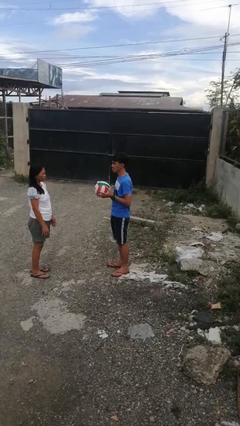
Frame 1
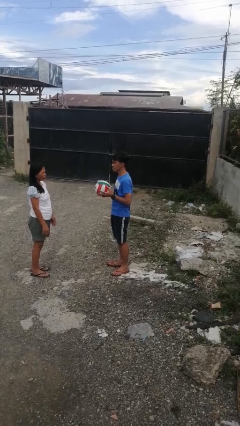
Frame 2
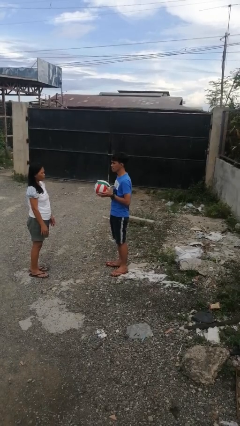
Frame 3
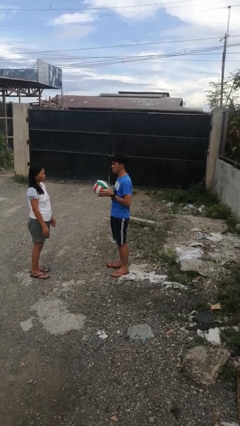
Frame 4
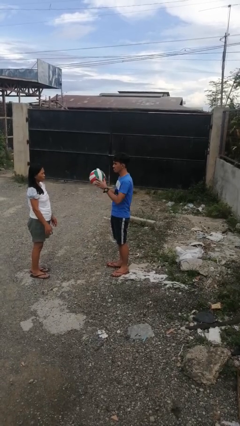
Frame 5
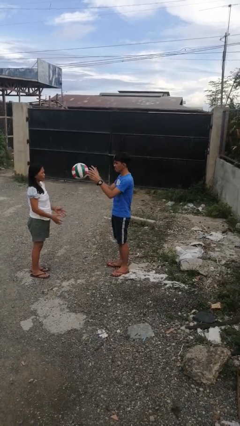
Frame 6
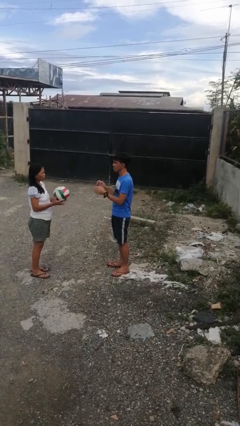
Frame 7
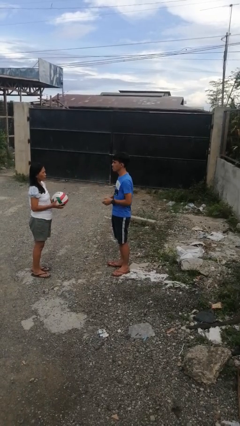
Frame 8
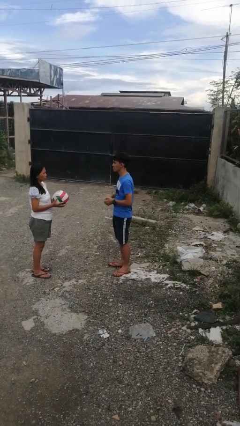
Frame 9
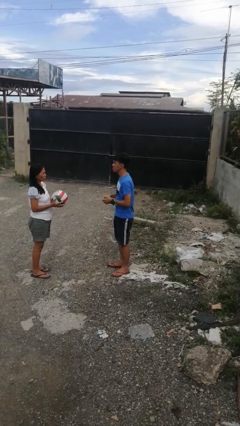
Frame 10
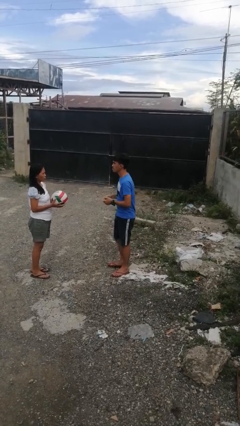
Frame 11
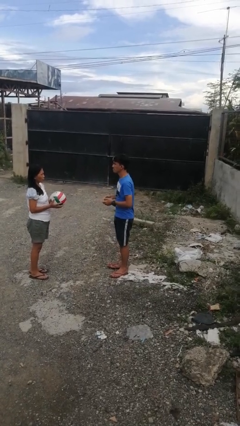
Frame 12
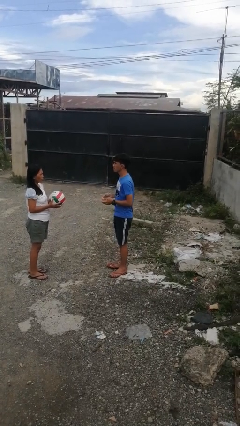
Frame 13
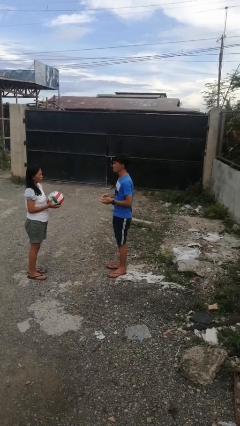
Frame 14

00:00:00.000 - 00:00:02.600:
person throws object to person

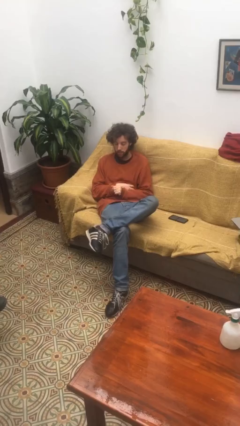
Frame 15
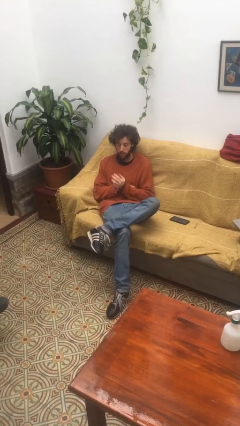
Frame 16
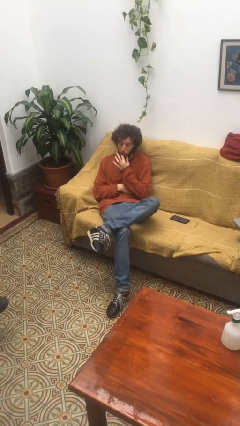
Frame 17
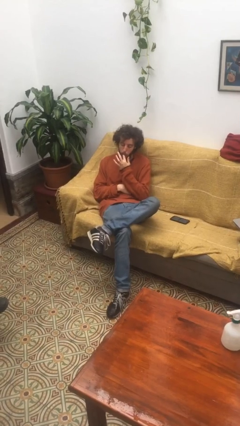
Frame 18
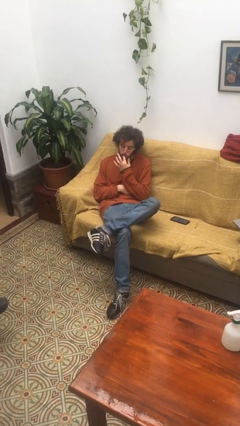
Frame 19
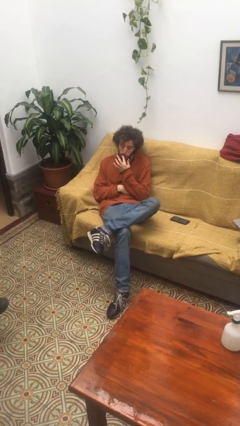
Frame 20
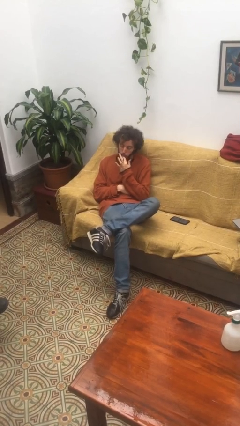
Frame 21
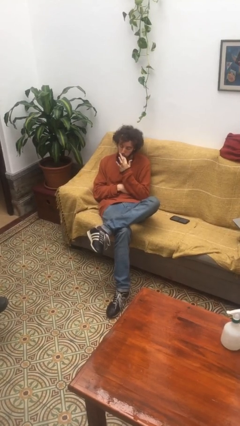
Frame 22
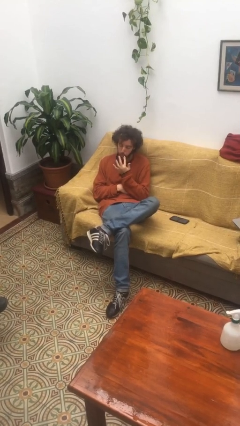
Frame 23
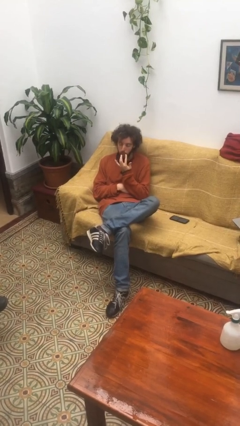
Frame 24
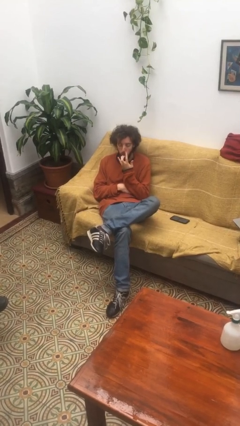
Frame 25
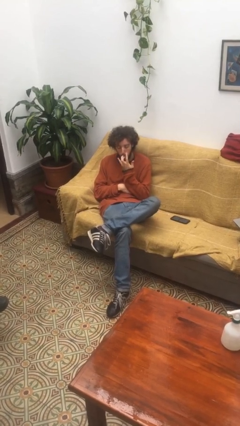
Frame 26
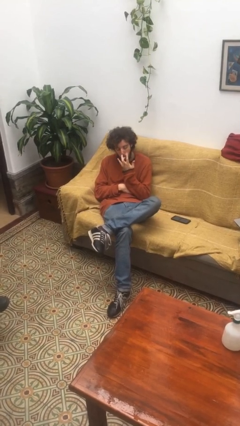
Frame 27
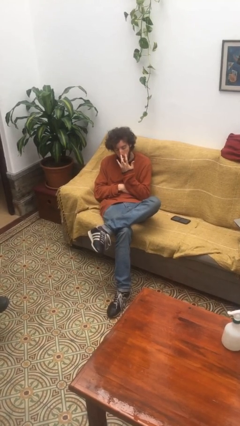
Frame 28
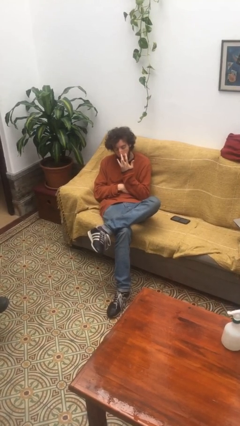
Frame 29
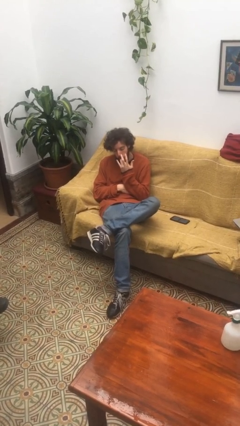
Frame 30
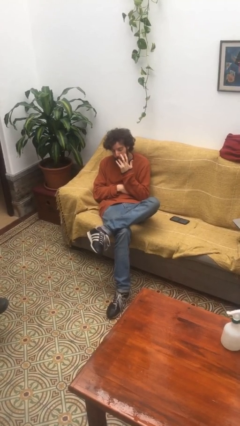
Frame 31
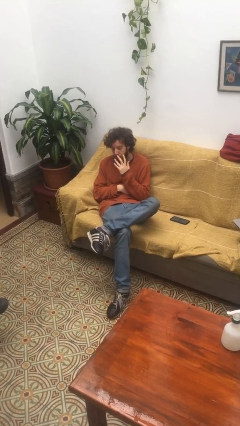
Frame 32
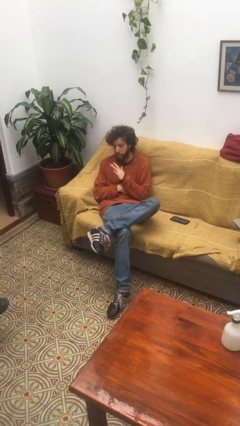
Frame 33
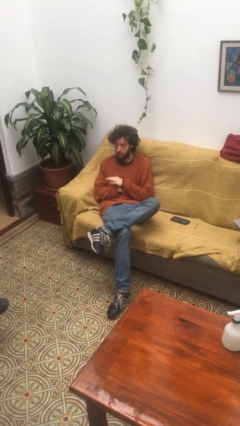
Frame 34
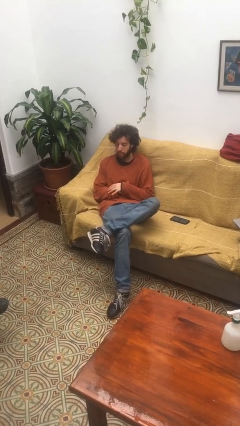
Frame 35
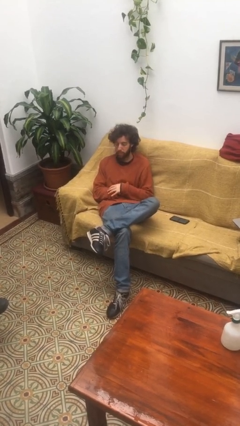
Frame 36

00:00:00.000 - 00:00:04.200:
person licks fingers

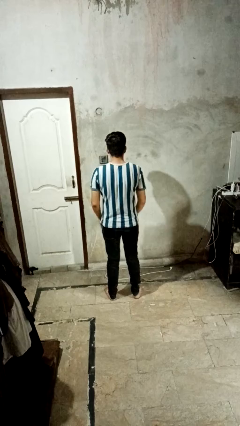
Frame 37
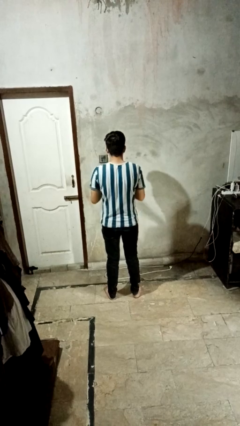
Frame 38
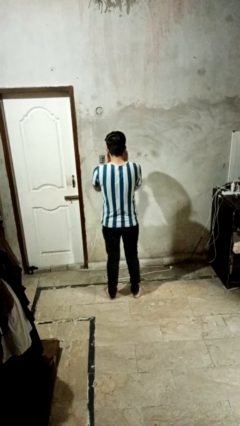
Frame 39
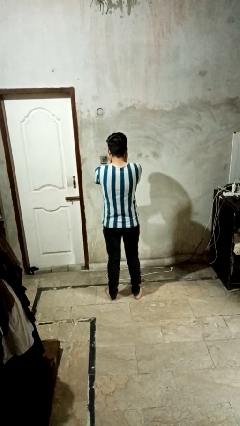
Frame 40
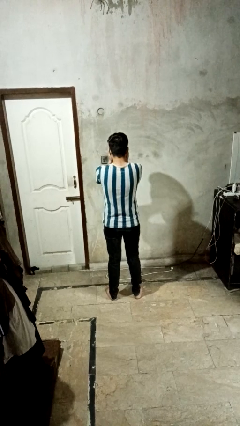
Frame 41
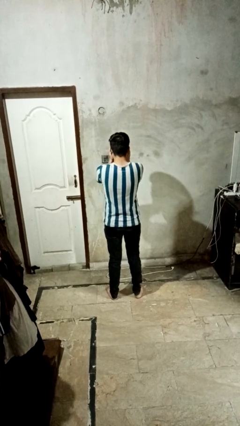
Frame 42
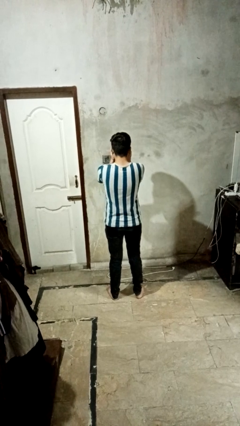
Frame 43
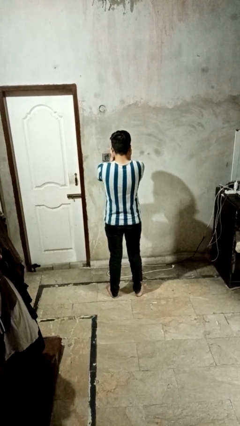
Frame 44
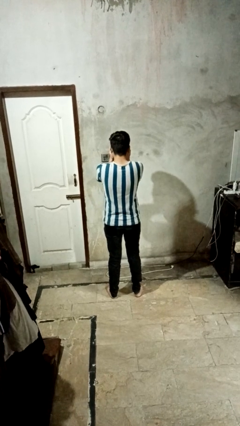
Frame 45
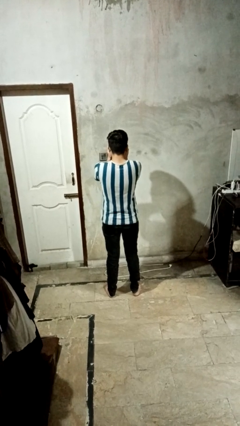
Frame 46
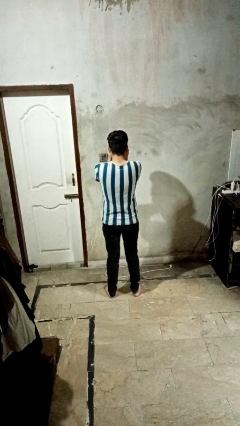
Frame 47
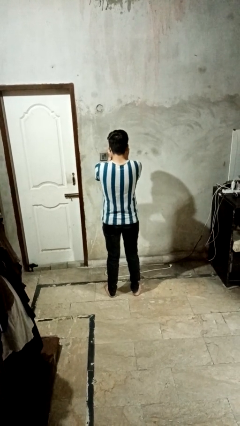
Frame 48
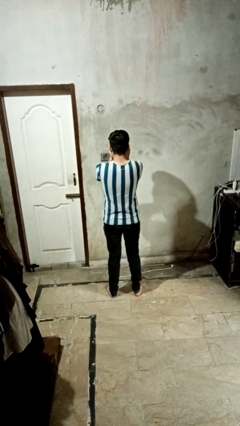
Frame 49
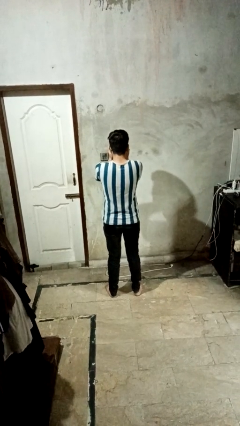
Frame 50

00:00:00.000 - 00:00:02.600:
person covers face with hands

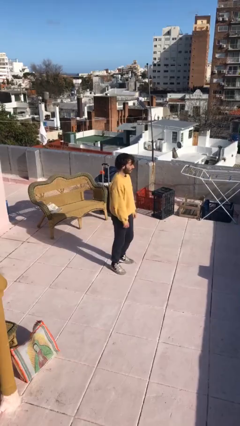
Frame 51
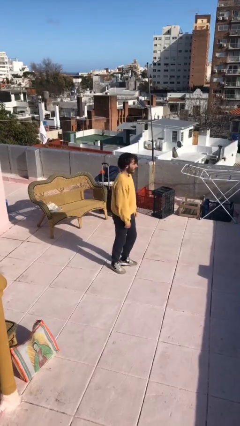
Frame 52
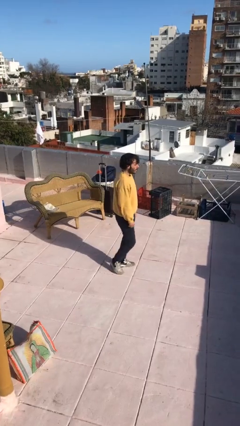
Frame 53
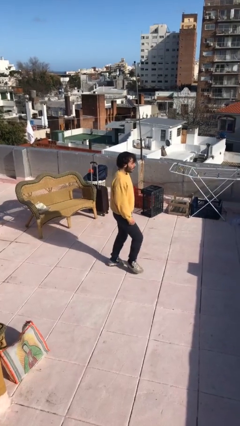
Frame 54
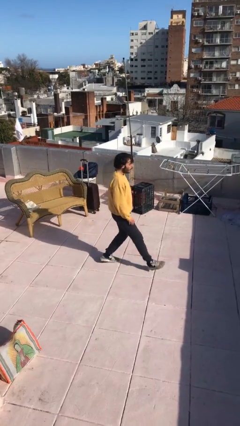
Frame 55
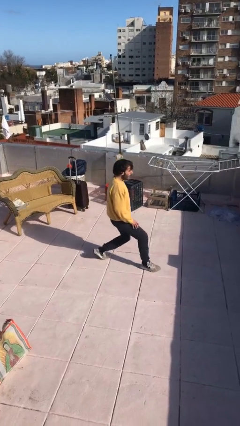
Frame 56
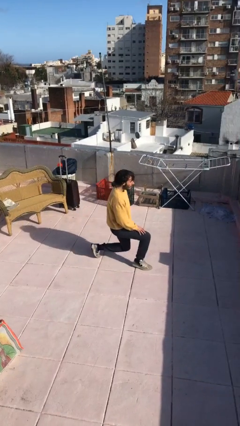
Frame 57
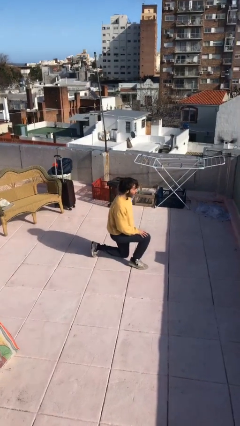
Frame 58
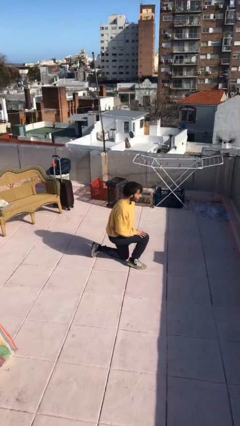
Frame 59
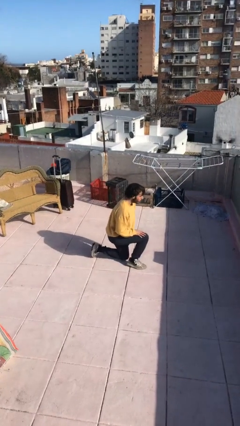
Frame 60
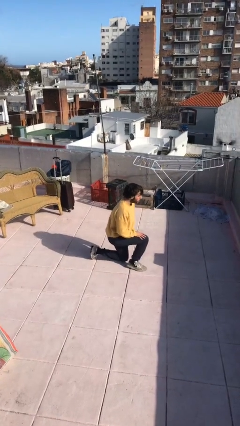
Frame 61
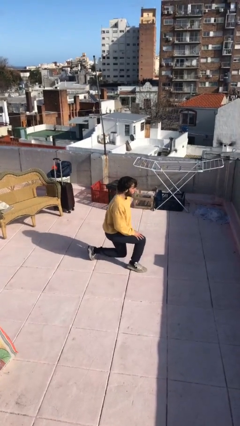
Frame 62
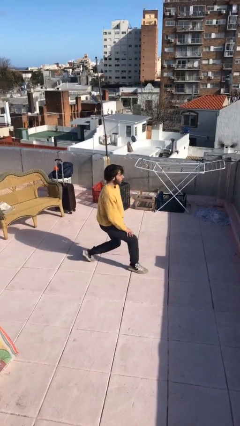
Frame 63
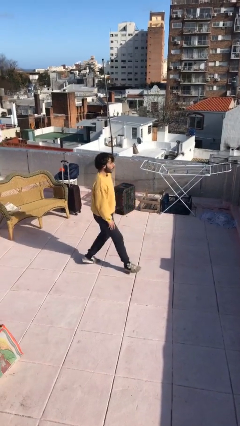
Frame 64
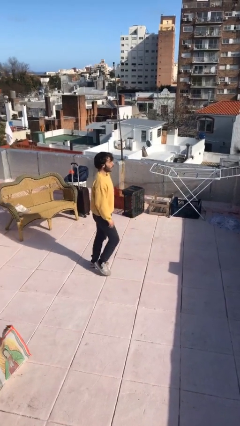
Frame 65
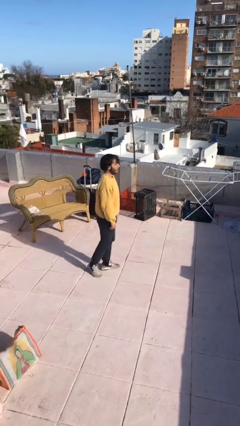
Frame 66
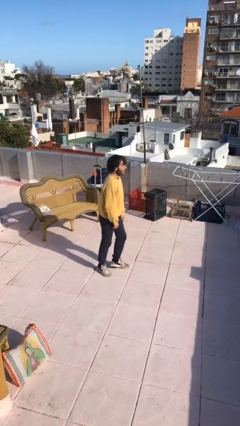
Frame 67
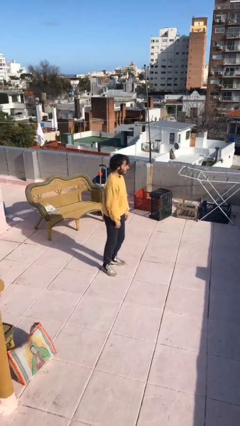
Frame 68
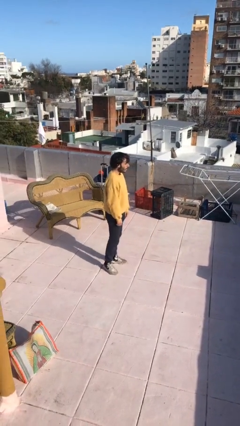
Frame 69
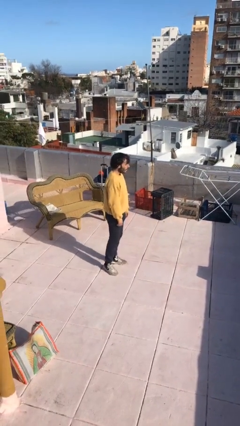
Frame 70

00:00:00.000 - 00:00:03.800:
person exercises with lunges

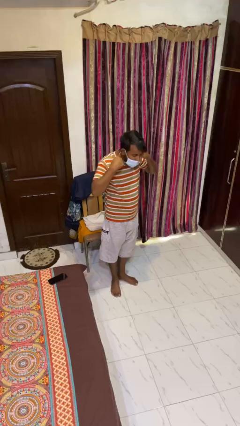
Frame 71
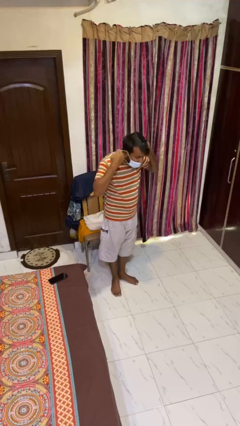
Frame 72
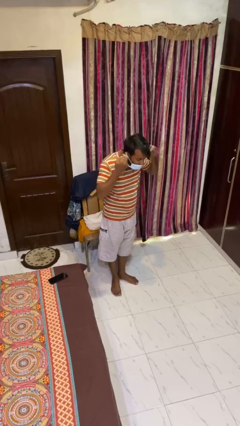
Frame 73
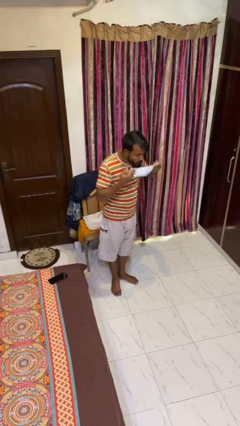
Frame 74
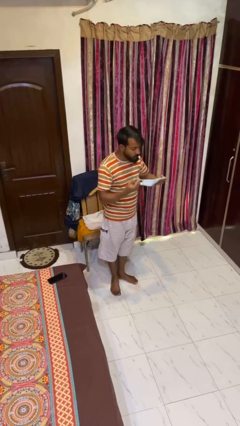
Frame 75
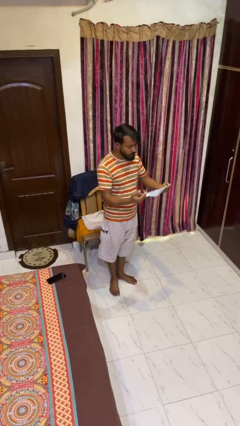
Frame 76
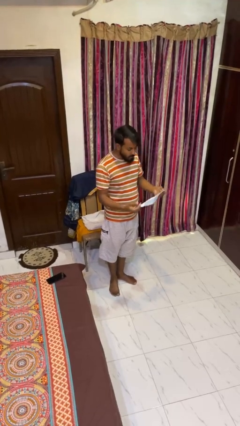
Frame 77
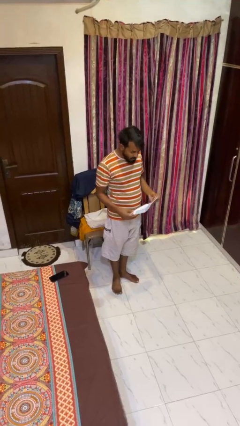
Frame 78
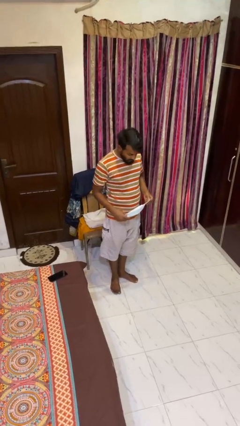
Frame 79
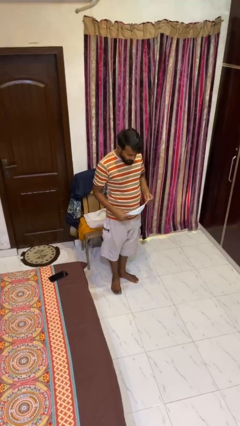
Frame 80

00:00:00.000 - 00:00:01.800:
person takes off facemask

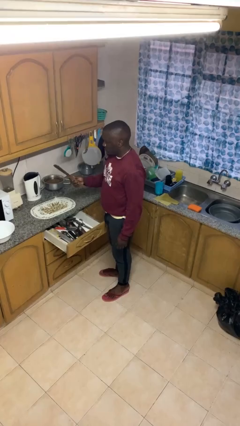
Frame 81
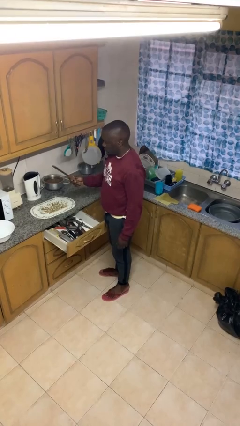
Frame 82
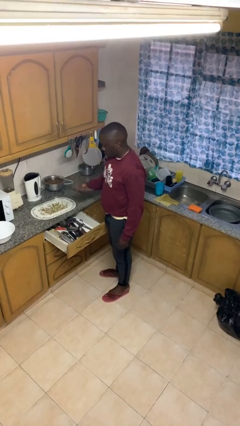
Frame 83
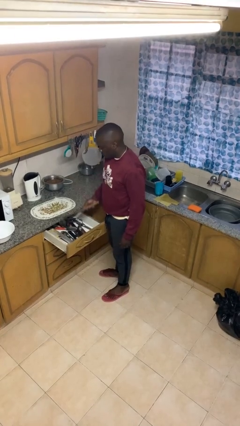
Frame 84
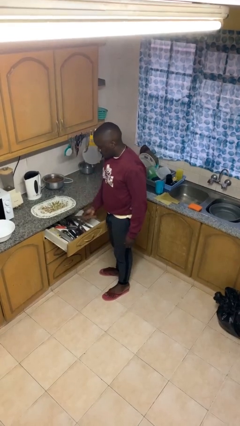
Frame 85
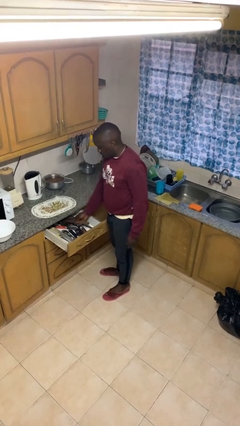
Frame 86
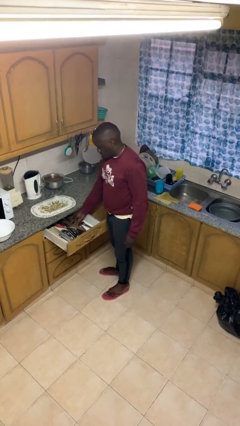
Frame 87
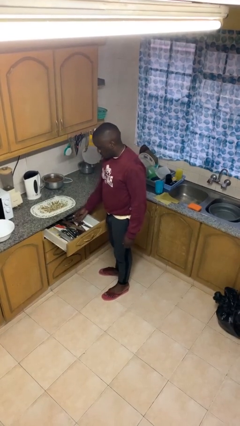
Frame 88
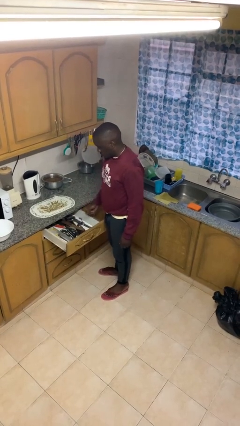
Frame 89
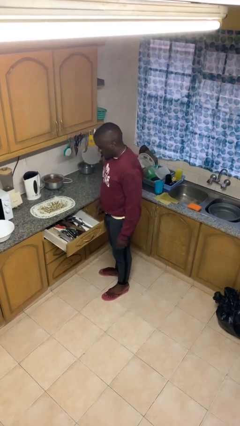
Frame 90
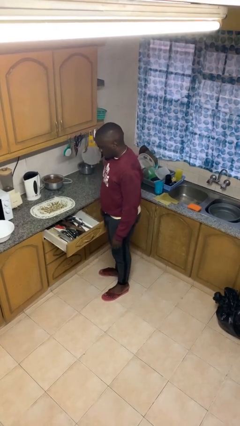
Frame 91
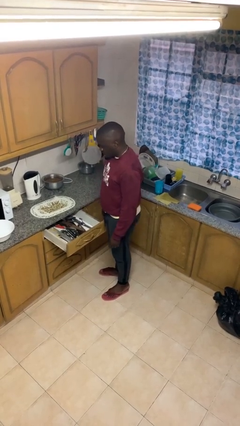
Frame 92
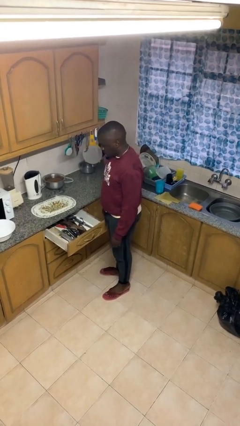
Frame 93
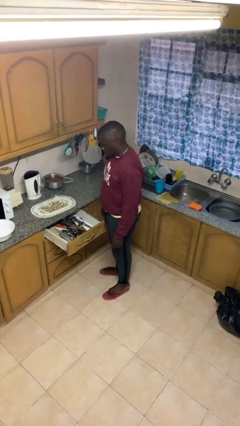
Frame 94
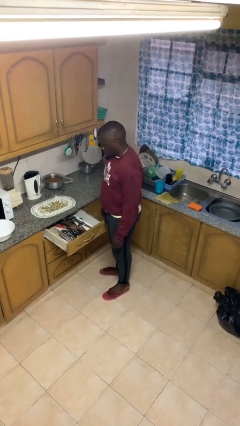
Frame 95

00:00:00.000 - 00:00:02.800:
person puts object into kitchen drawer
